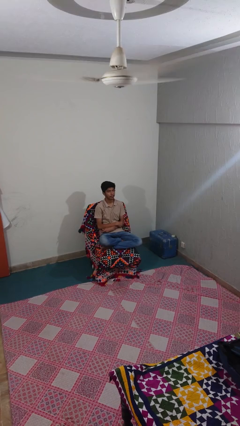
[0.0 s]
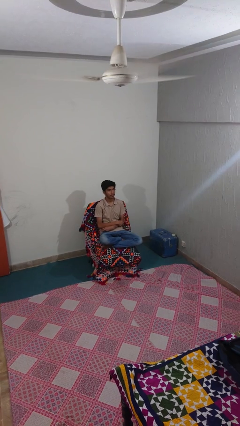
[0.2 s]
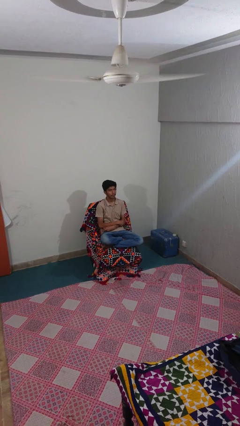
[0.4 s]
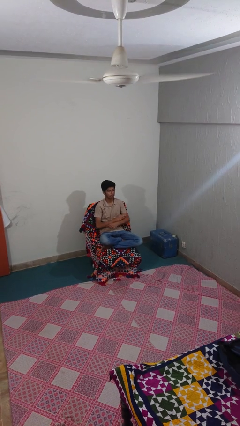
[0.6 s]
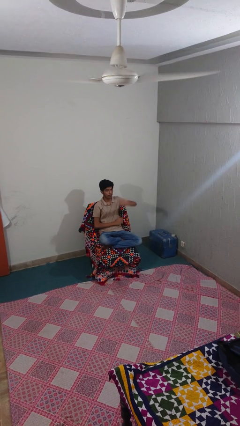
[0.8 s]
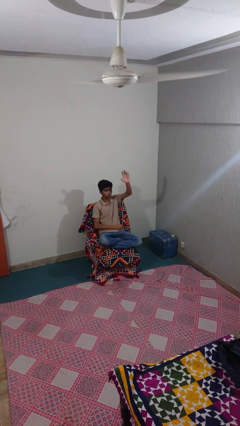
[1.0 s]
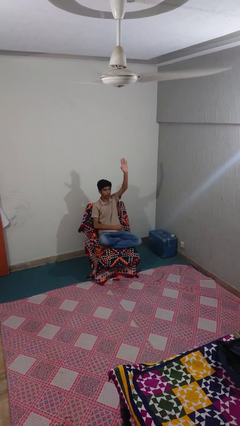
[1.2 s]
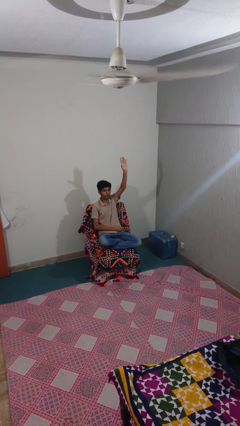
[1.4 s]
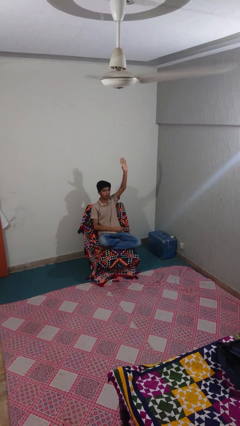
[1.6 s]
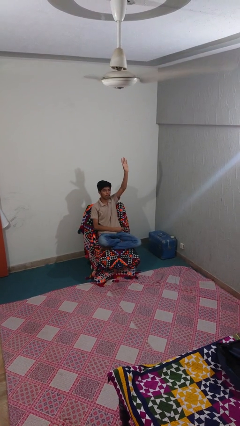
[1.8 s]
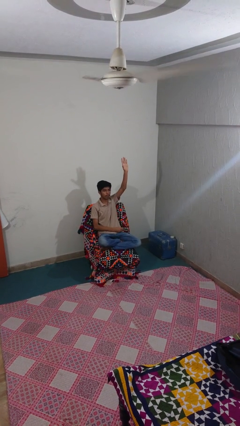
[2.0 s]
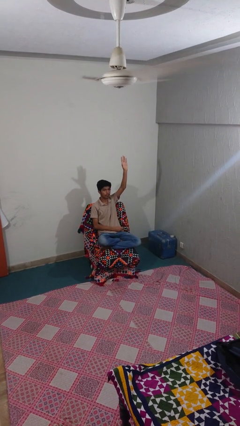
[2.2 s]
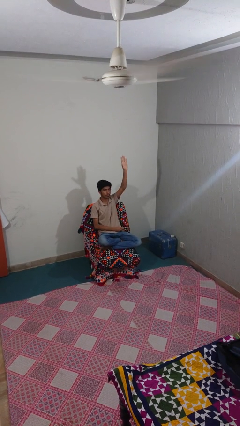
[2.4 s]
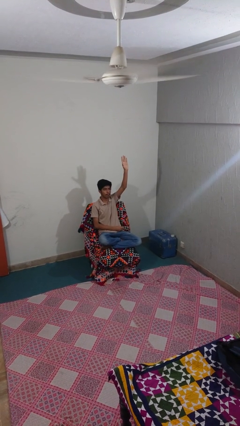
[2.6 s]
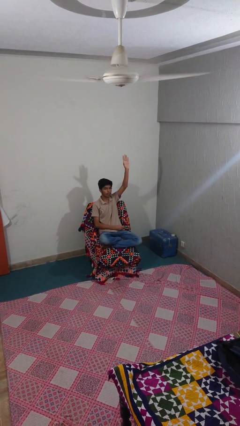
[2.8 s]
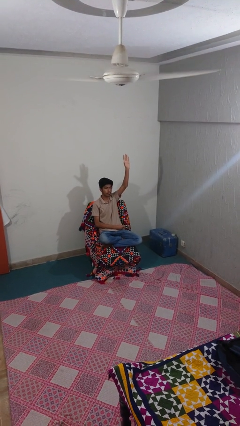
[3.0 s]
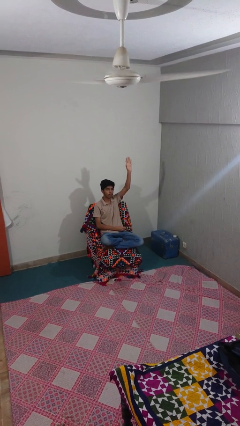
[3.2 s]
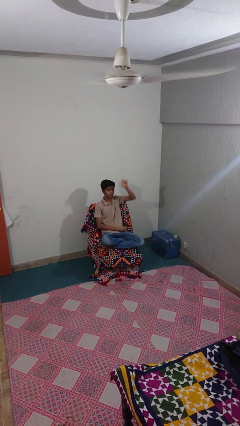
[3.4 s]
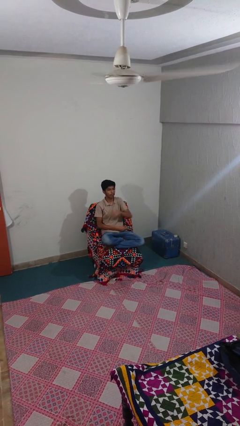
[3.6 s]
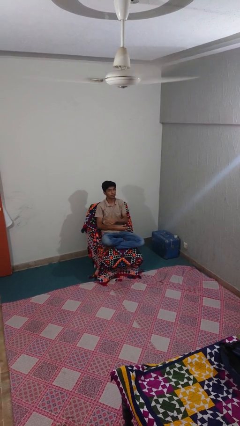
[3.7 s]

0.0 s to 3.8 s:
person gestures raise hand

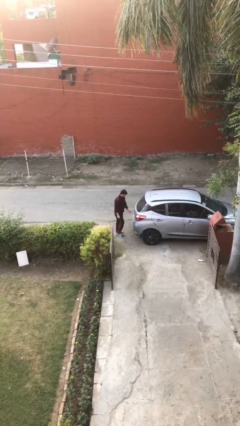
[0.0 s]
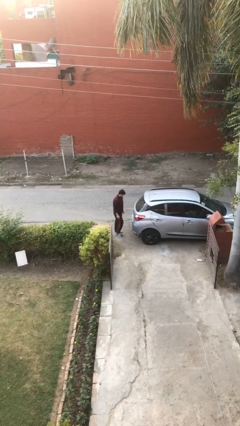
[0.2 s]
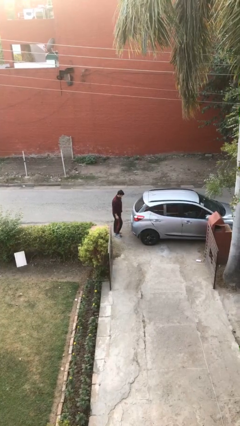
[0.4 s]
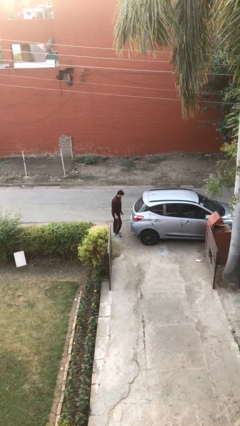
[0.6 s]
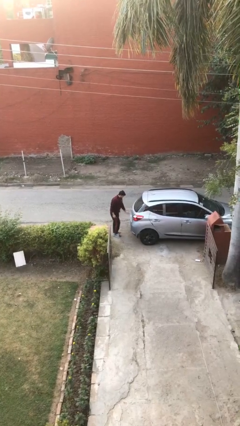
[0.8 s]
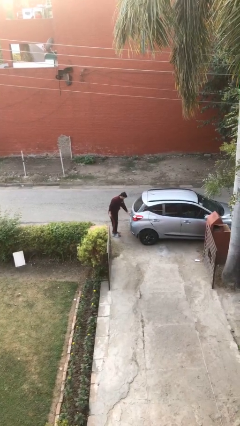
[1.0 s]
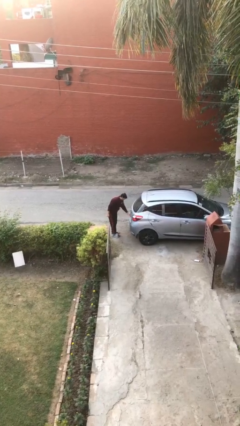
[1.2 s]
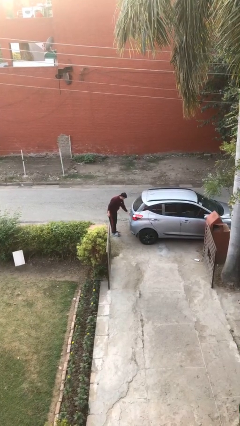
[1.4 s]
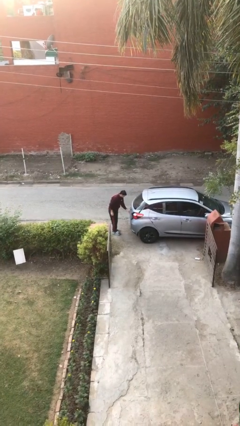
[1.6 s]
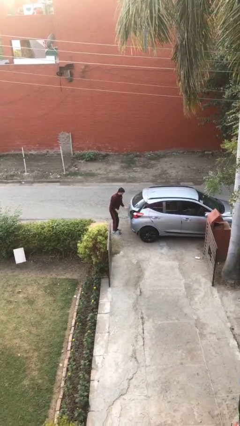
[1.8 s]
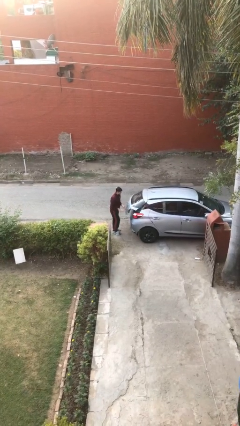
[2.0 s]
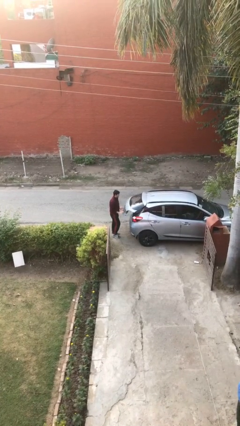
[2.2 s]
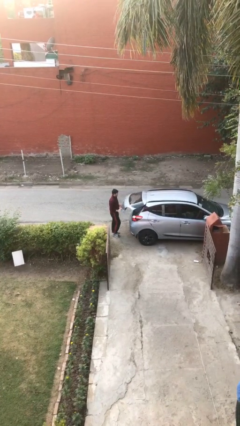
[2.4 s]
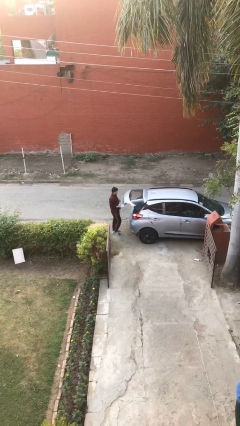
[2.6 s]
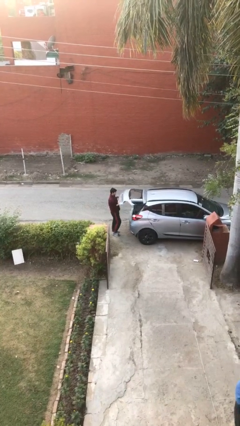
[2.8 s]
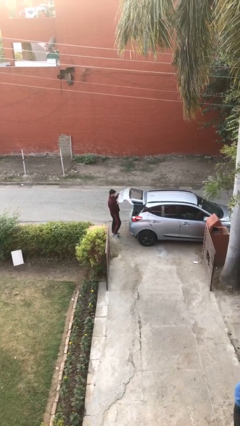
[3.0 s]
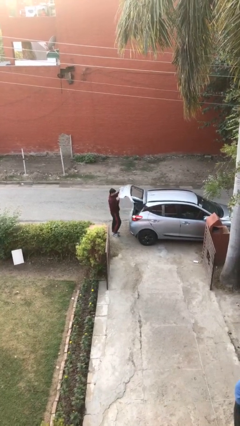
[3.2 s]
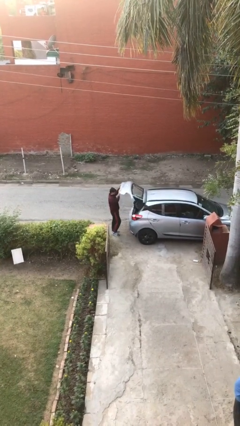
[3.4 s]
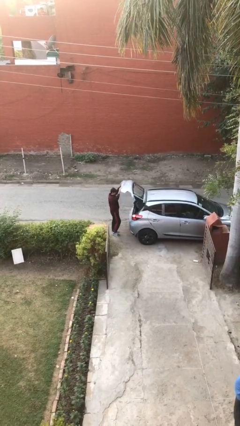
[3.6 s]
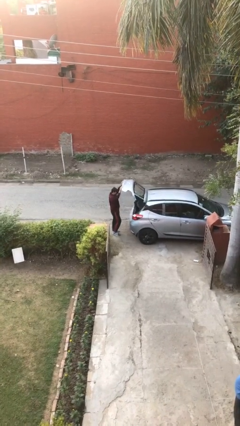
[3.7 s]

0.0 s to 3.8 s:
person opens car trunk

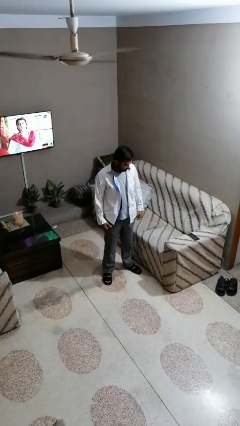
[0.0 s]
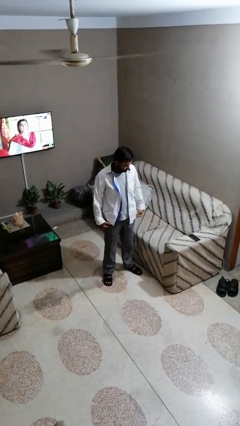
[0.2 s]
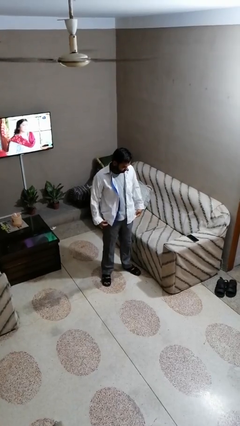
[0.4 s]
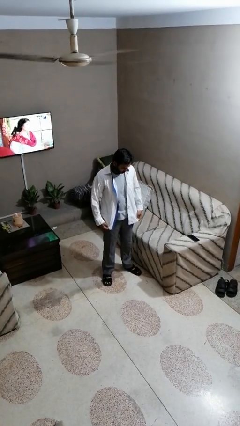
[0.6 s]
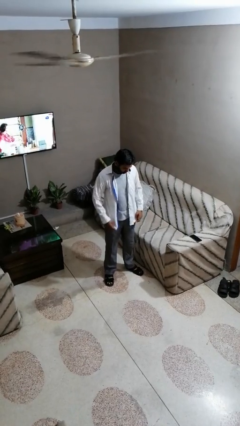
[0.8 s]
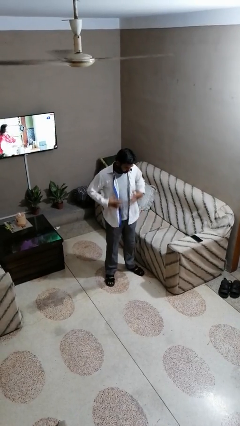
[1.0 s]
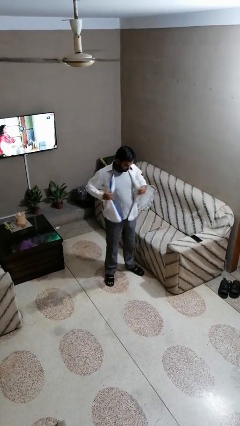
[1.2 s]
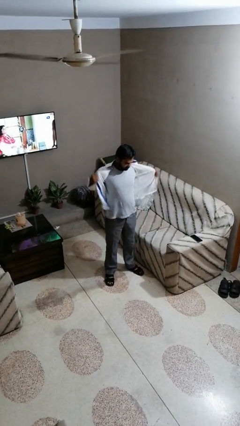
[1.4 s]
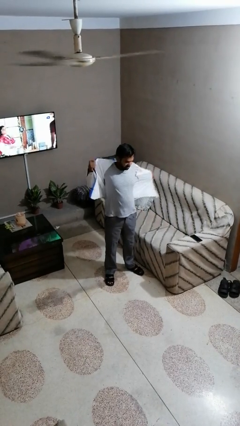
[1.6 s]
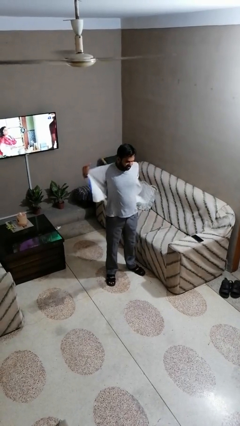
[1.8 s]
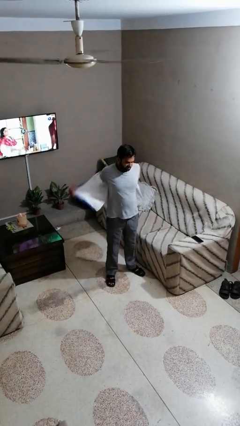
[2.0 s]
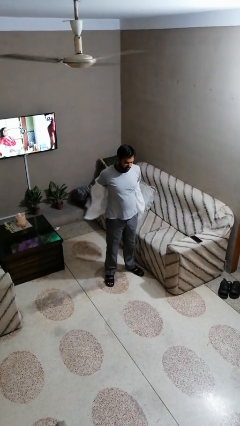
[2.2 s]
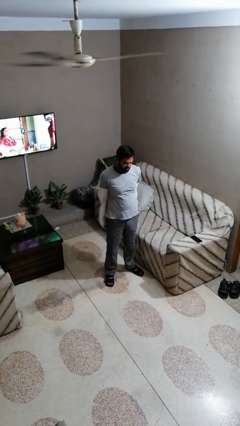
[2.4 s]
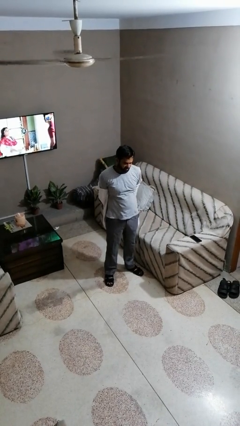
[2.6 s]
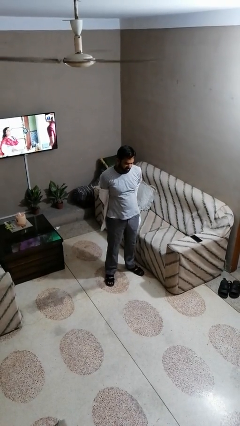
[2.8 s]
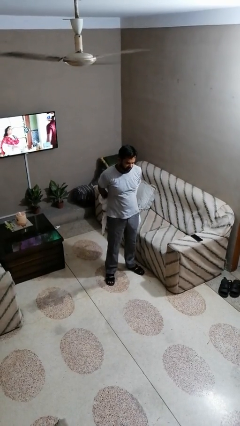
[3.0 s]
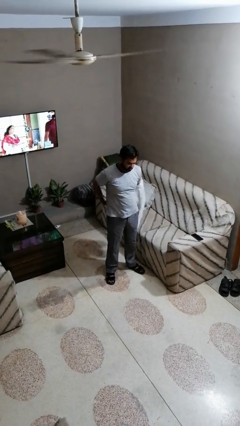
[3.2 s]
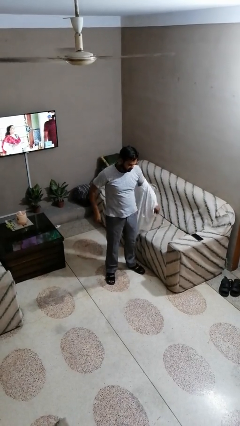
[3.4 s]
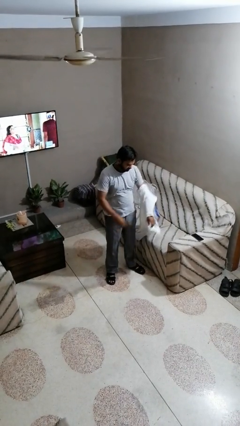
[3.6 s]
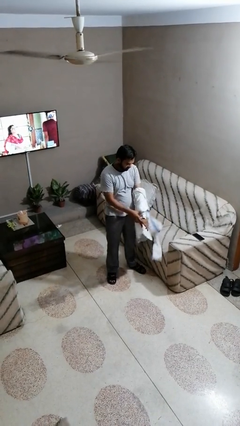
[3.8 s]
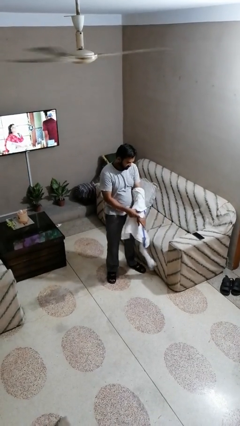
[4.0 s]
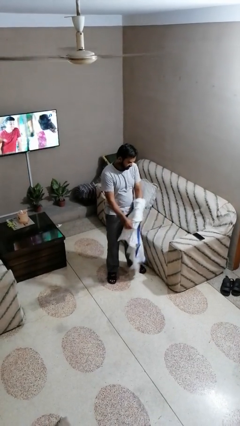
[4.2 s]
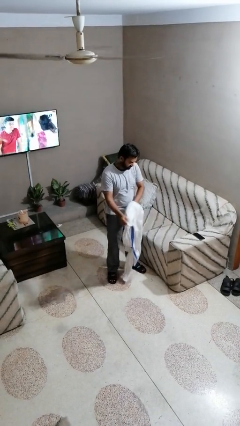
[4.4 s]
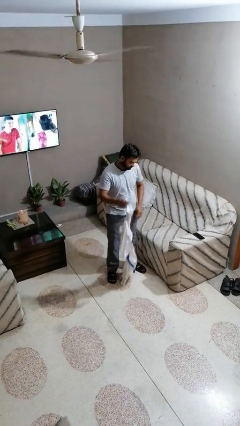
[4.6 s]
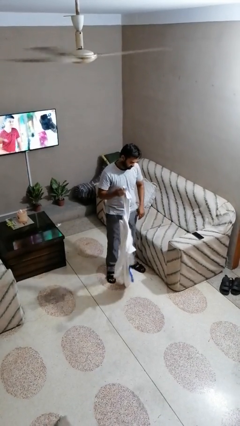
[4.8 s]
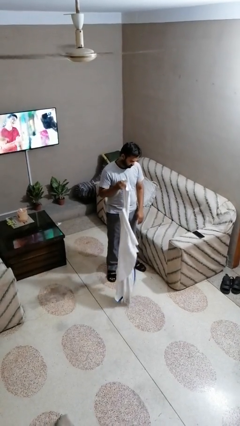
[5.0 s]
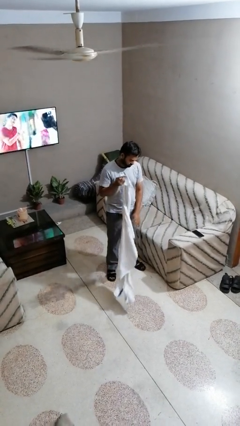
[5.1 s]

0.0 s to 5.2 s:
person takes off shirt

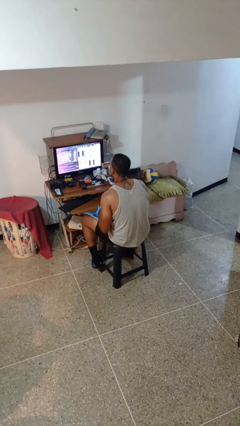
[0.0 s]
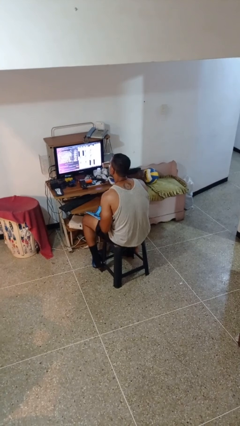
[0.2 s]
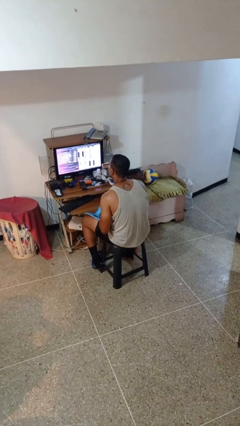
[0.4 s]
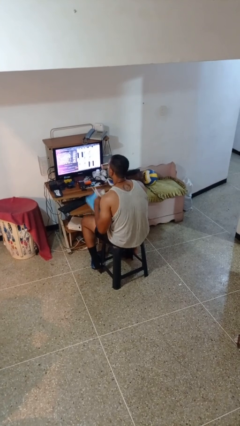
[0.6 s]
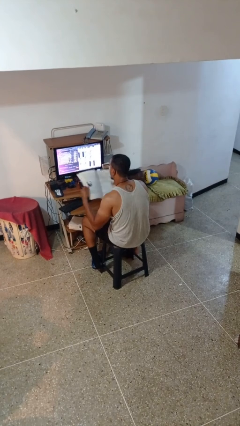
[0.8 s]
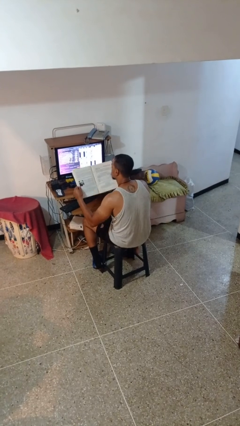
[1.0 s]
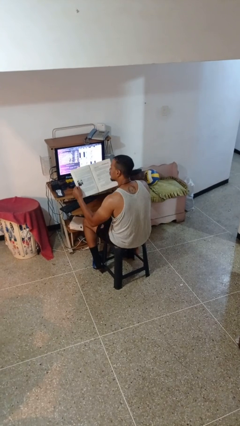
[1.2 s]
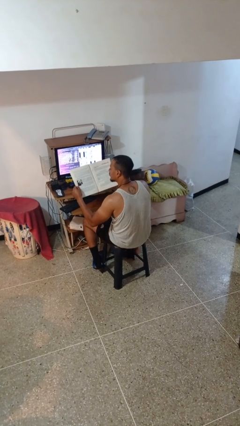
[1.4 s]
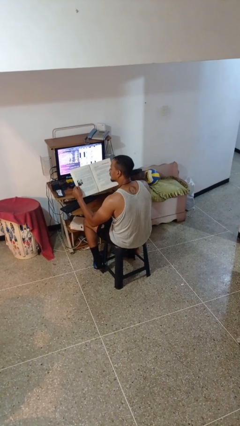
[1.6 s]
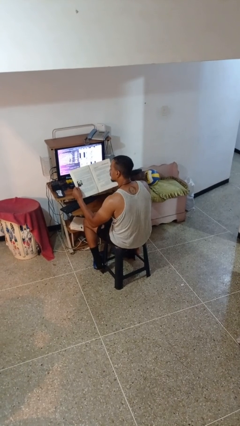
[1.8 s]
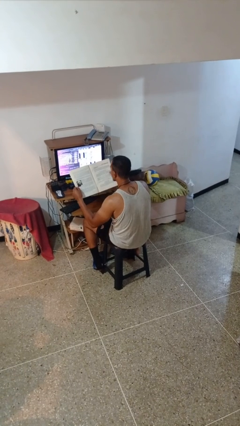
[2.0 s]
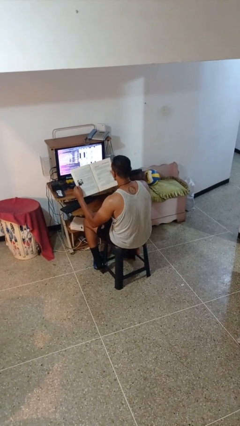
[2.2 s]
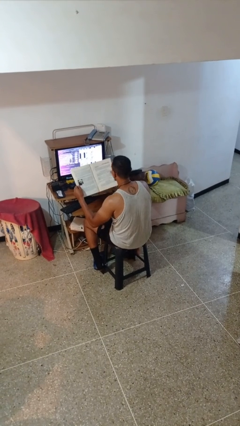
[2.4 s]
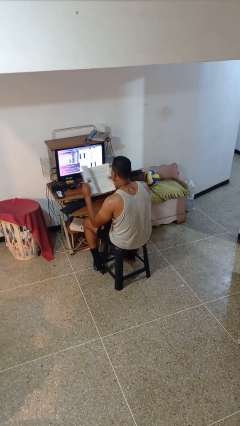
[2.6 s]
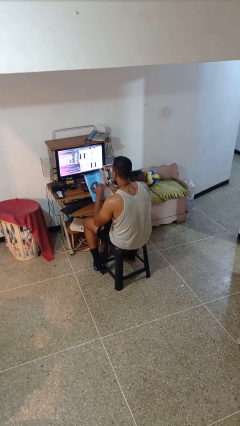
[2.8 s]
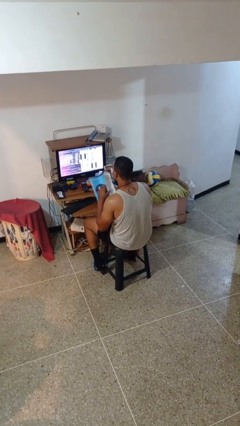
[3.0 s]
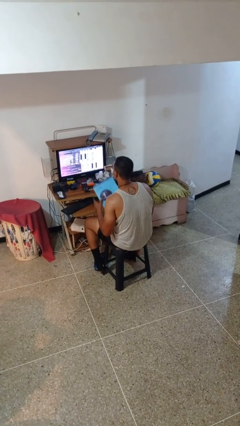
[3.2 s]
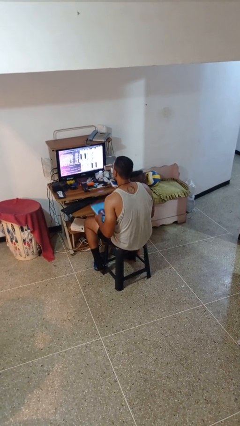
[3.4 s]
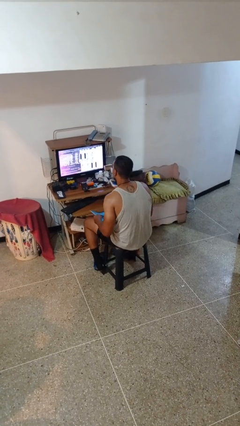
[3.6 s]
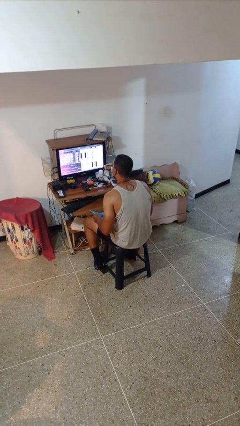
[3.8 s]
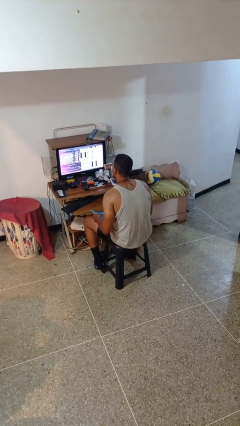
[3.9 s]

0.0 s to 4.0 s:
person reads magazine

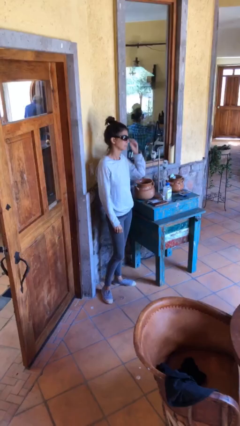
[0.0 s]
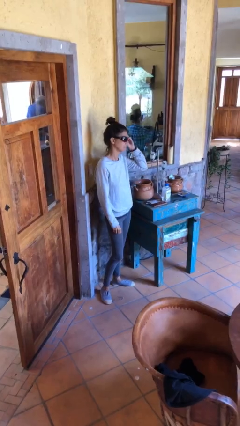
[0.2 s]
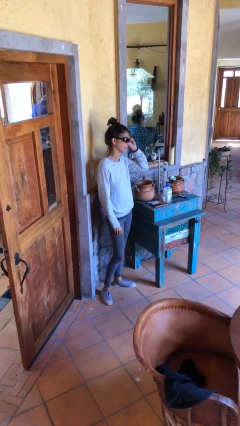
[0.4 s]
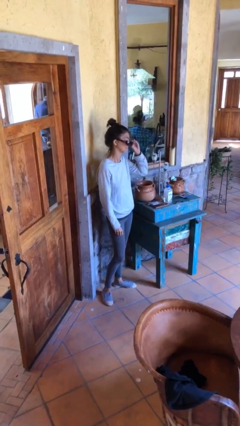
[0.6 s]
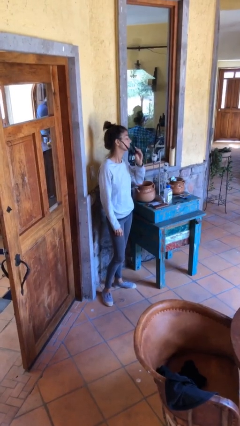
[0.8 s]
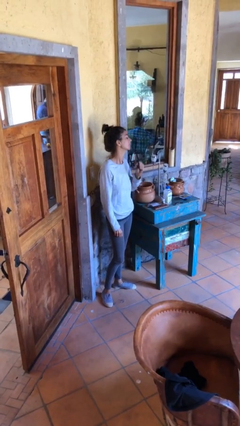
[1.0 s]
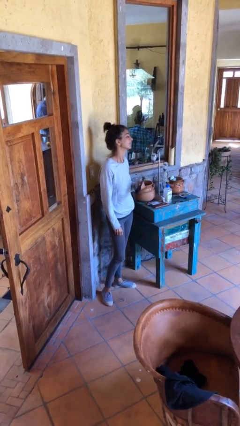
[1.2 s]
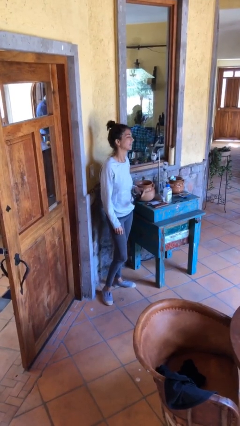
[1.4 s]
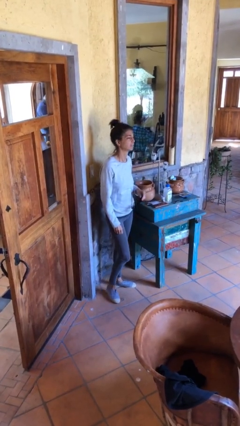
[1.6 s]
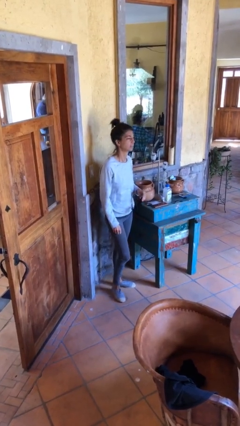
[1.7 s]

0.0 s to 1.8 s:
person takes off sunglasses
